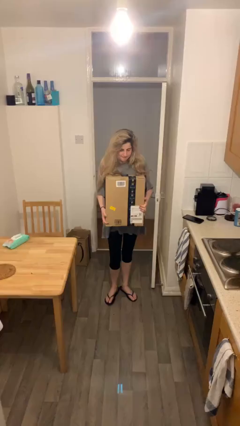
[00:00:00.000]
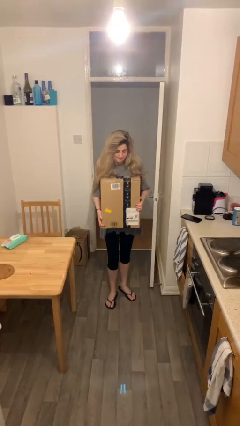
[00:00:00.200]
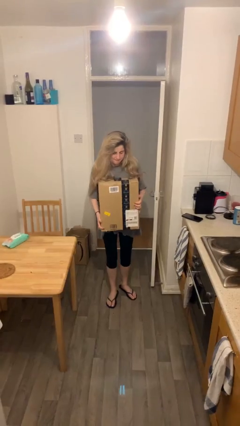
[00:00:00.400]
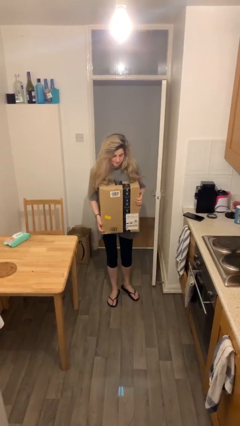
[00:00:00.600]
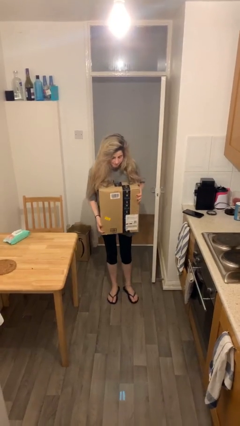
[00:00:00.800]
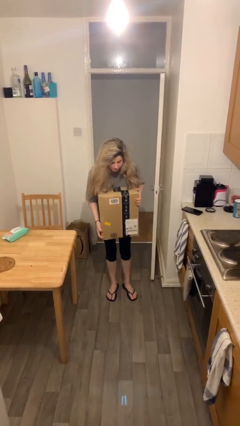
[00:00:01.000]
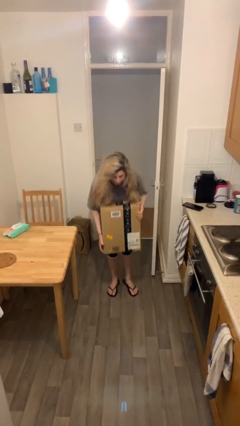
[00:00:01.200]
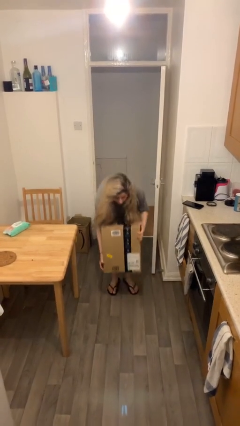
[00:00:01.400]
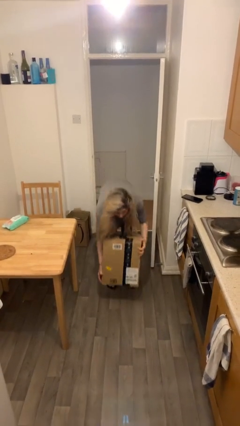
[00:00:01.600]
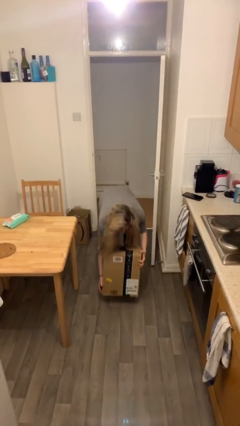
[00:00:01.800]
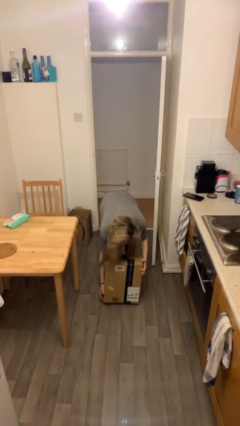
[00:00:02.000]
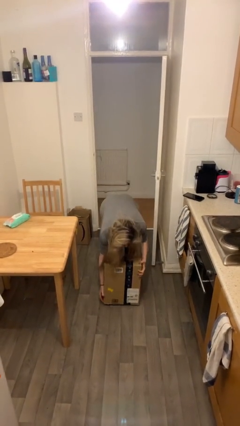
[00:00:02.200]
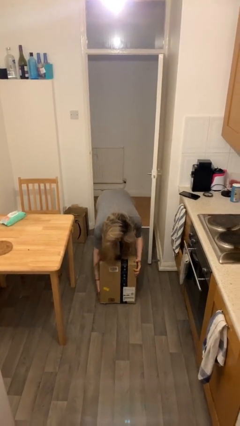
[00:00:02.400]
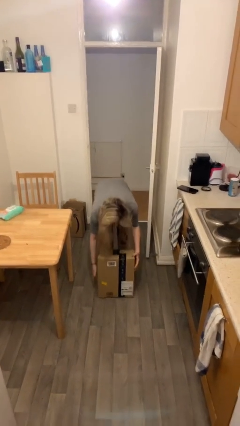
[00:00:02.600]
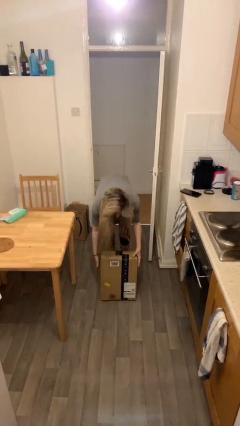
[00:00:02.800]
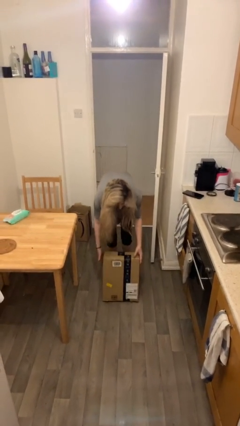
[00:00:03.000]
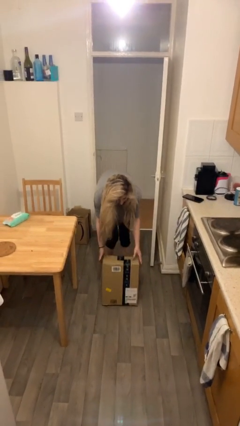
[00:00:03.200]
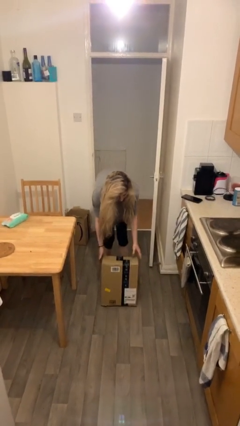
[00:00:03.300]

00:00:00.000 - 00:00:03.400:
person puts down object on floor

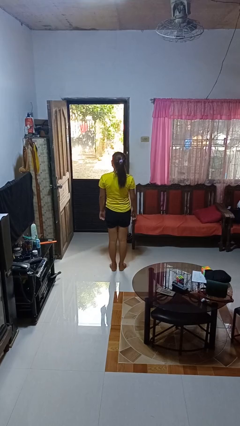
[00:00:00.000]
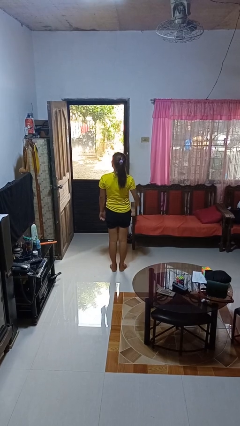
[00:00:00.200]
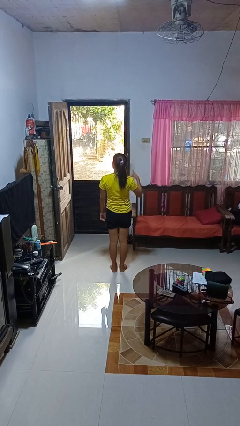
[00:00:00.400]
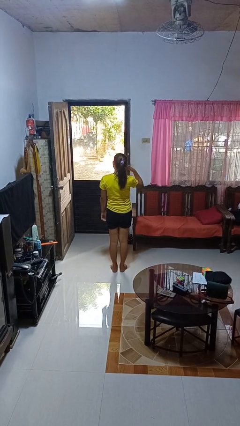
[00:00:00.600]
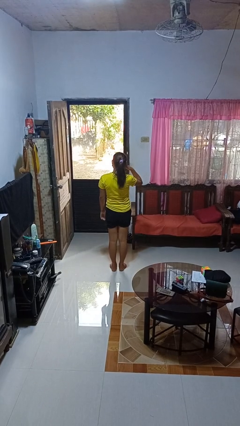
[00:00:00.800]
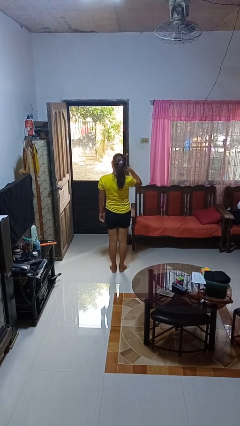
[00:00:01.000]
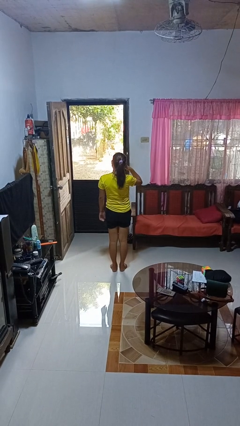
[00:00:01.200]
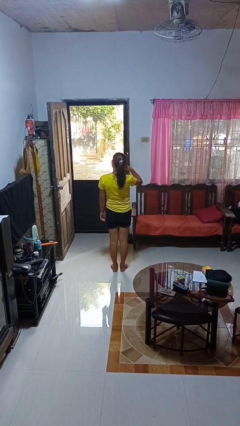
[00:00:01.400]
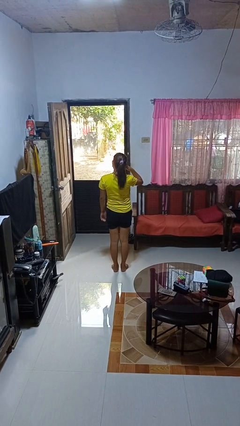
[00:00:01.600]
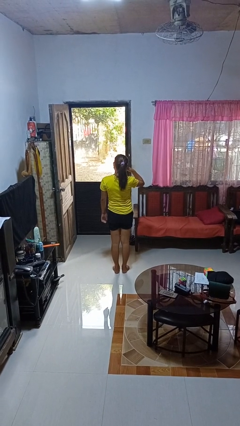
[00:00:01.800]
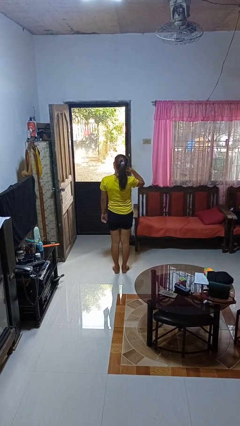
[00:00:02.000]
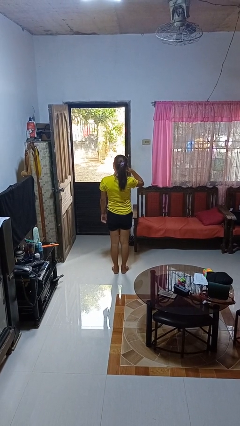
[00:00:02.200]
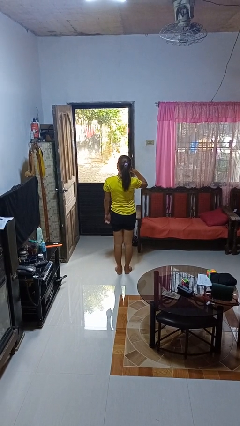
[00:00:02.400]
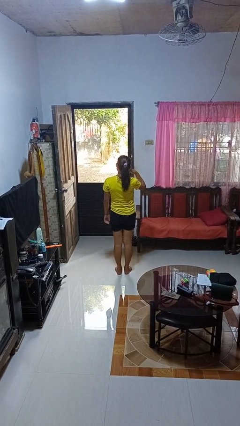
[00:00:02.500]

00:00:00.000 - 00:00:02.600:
person gestures call me

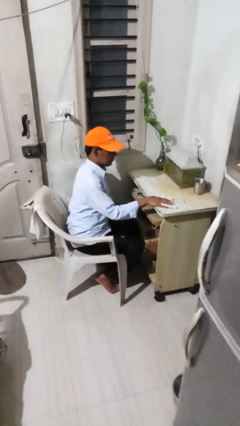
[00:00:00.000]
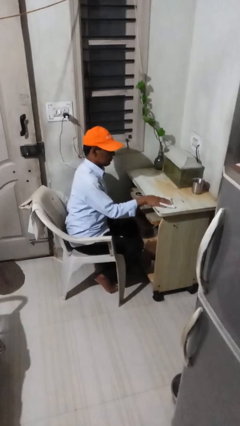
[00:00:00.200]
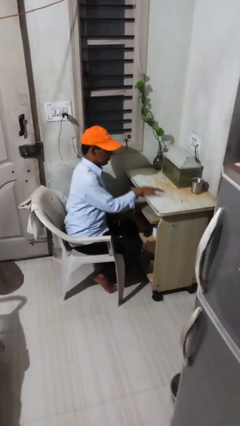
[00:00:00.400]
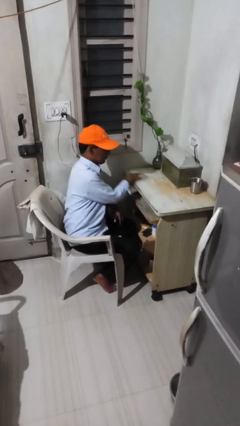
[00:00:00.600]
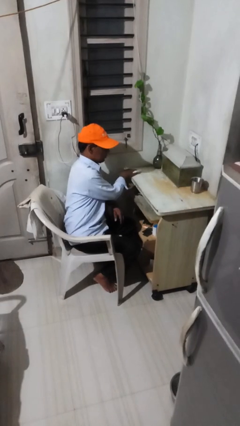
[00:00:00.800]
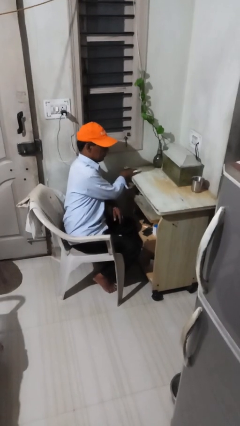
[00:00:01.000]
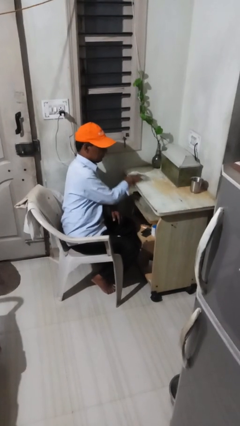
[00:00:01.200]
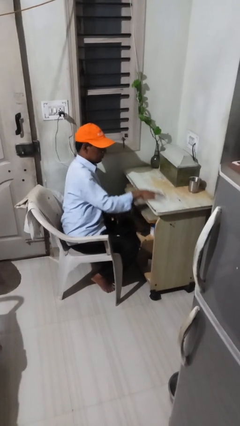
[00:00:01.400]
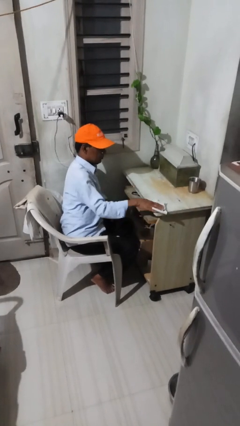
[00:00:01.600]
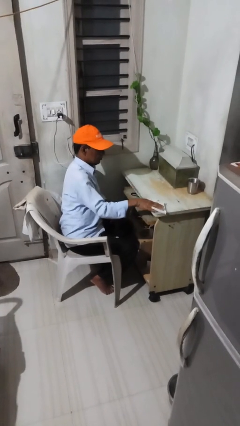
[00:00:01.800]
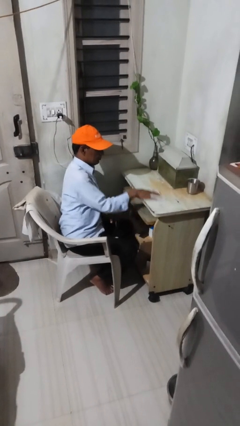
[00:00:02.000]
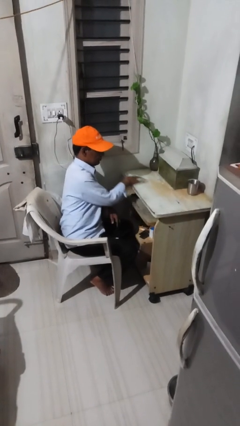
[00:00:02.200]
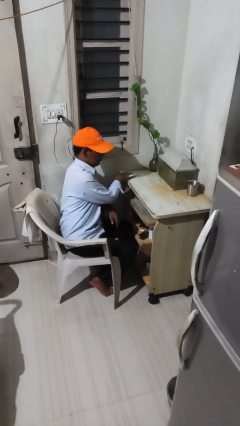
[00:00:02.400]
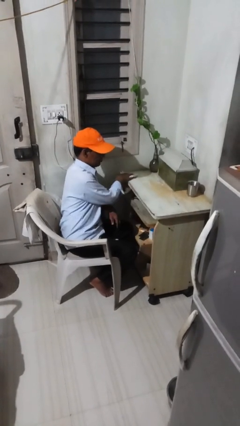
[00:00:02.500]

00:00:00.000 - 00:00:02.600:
person cleans table with rag

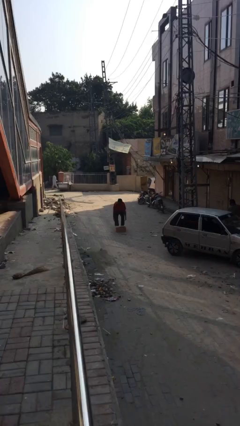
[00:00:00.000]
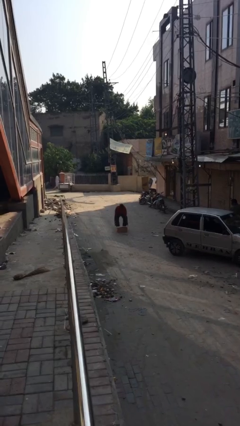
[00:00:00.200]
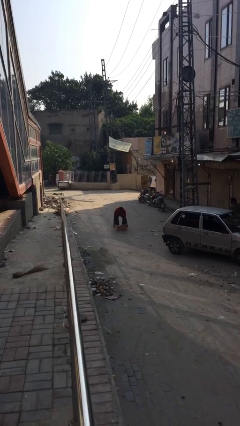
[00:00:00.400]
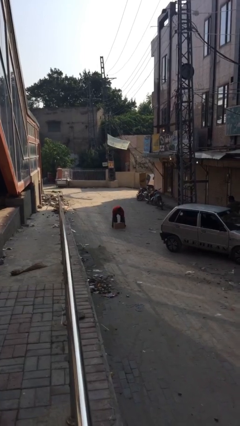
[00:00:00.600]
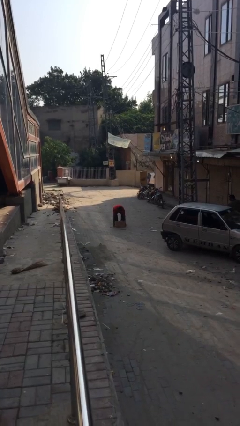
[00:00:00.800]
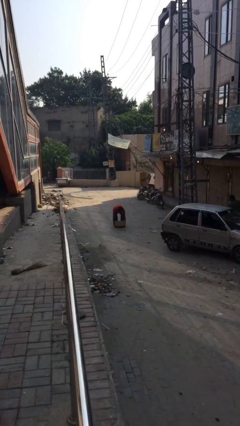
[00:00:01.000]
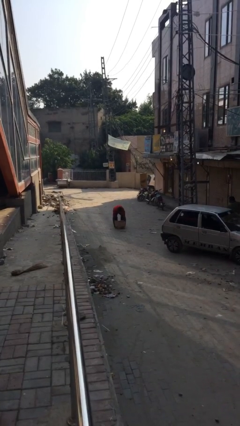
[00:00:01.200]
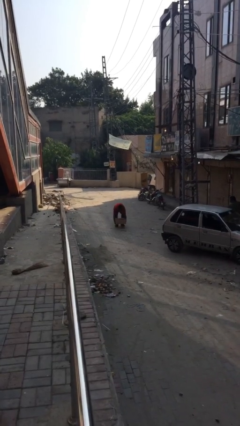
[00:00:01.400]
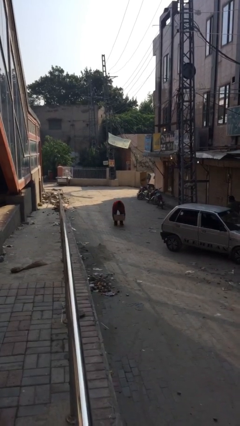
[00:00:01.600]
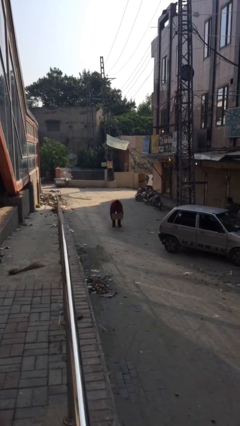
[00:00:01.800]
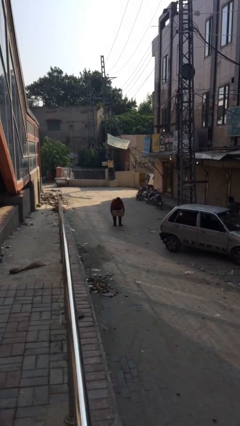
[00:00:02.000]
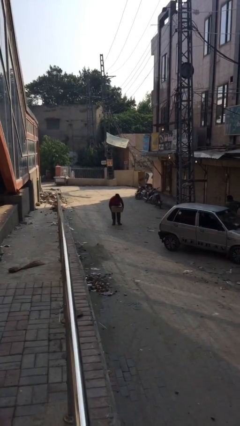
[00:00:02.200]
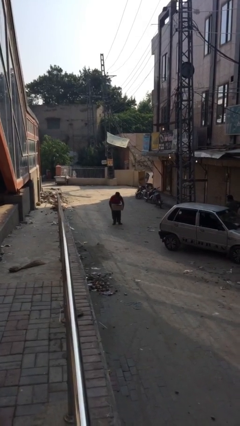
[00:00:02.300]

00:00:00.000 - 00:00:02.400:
person picks up object from floor

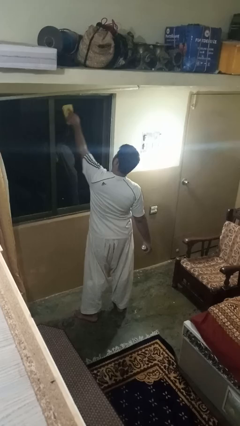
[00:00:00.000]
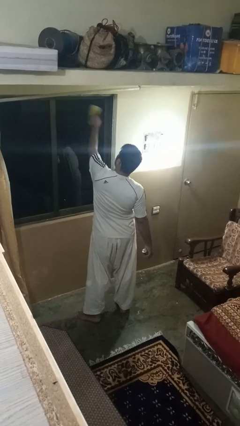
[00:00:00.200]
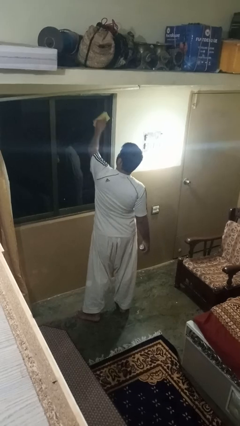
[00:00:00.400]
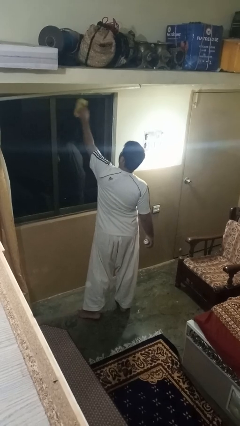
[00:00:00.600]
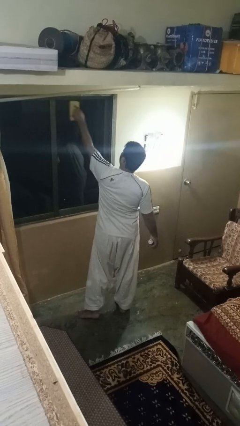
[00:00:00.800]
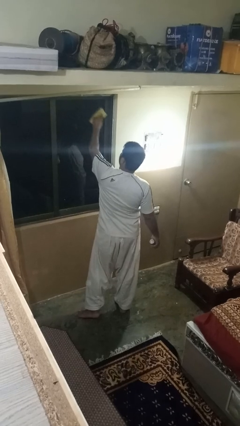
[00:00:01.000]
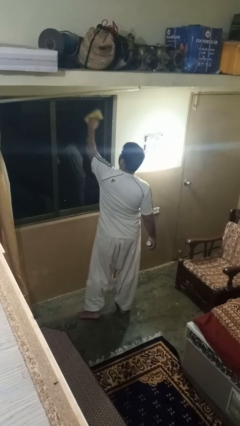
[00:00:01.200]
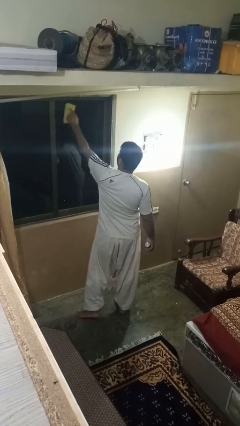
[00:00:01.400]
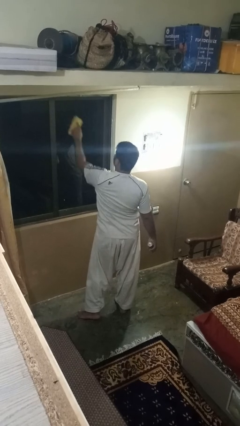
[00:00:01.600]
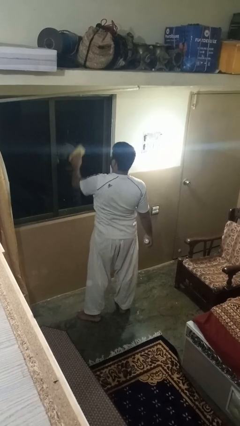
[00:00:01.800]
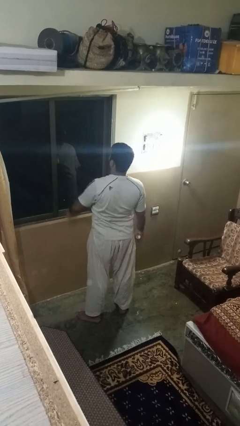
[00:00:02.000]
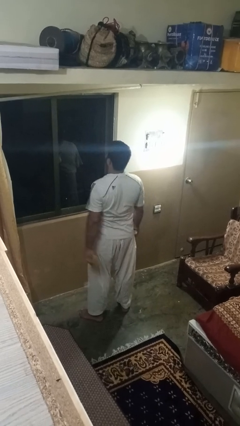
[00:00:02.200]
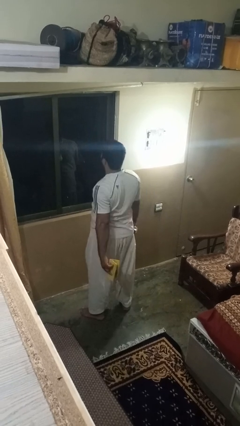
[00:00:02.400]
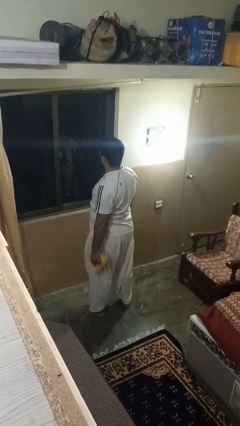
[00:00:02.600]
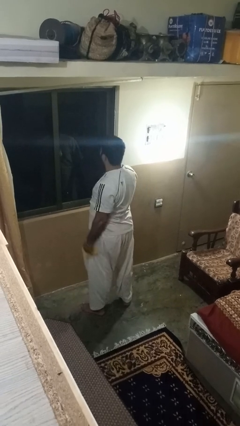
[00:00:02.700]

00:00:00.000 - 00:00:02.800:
person washes window

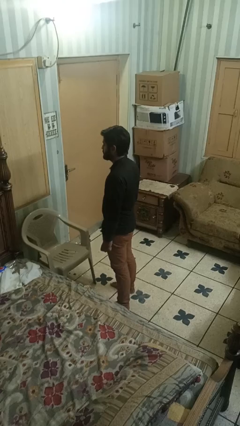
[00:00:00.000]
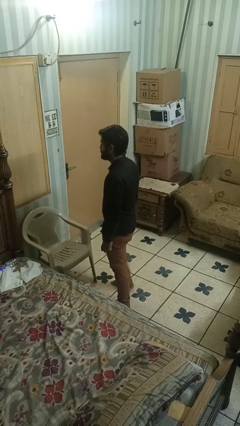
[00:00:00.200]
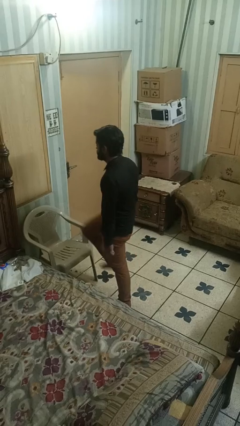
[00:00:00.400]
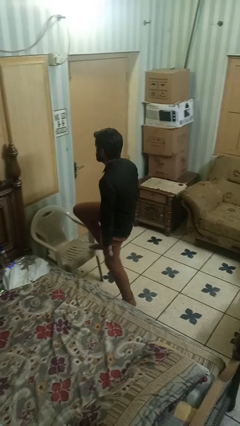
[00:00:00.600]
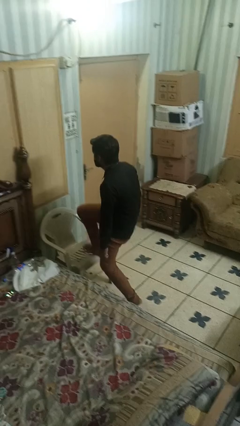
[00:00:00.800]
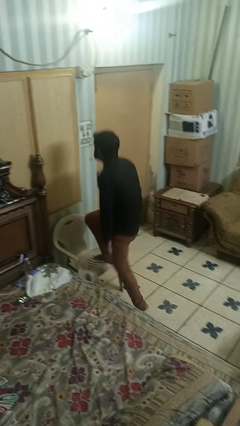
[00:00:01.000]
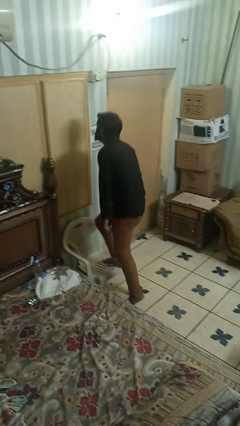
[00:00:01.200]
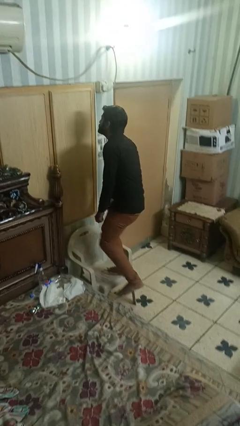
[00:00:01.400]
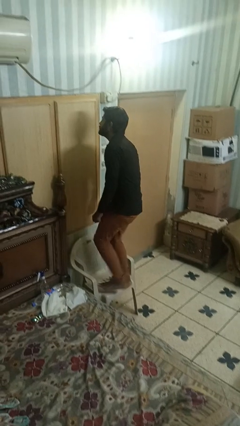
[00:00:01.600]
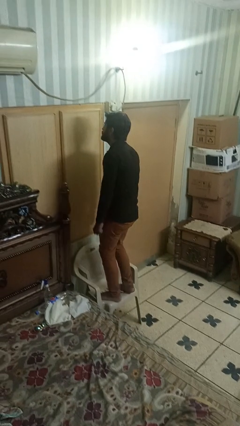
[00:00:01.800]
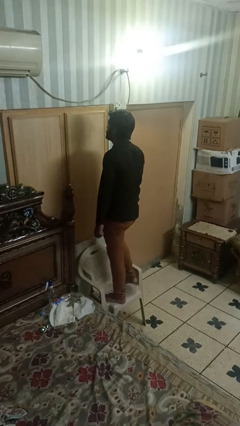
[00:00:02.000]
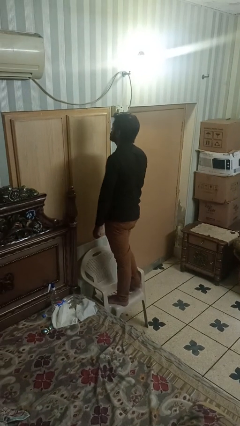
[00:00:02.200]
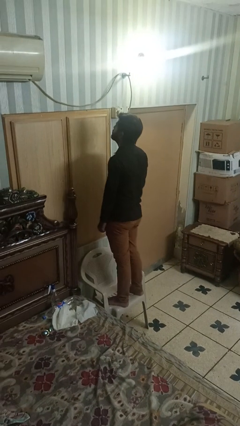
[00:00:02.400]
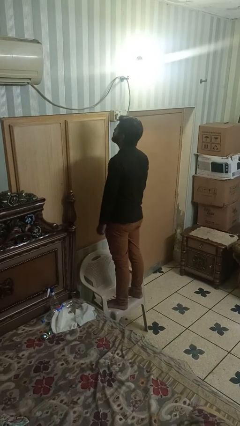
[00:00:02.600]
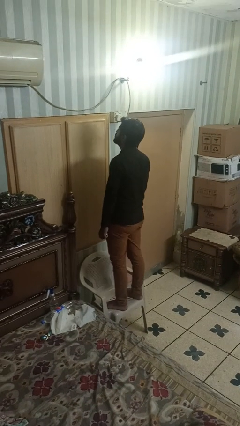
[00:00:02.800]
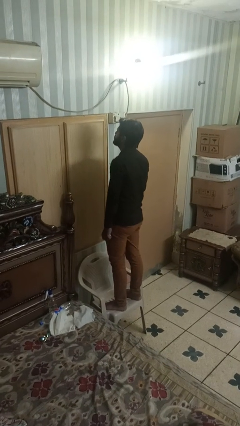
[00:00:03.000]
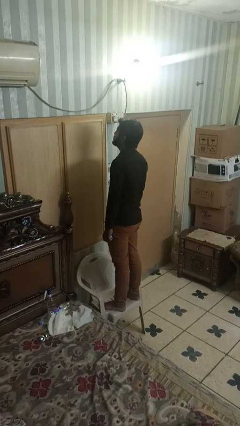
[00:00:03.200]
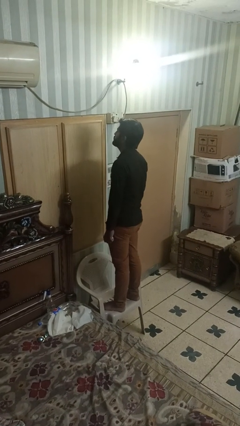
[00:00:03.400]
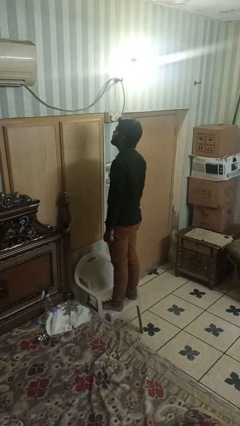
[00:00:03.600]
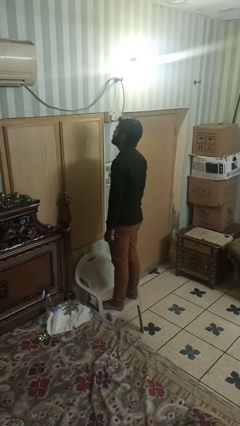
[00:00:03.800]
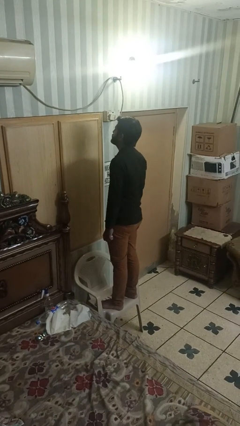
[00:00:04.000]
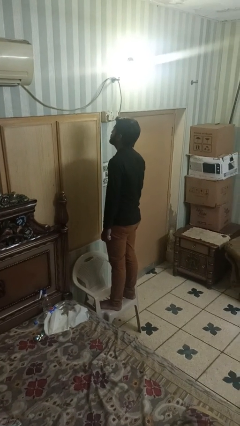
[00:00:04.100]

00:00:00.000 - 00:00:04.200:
person climbs on chair
